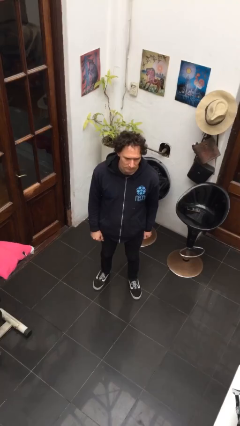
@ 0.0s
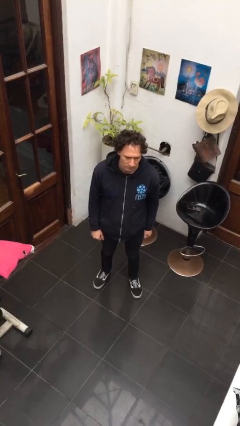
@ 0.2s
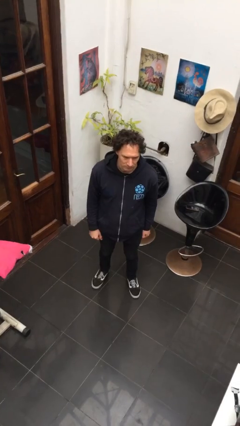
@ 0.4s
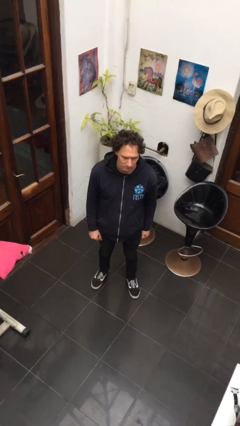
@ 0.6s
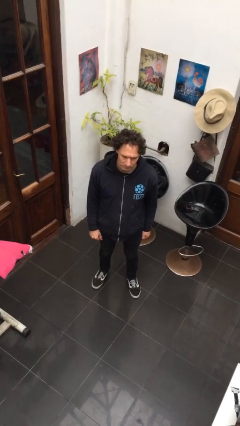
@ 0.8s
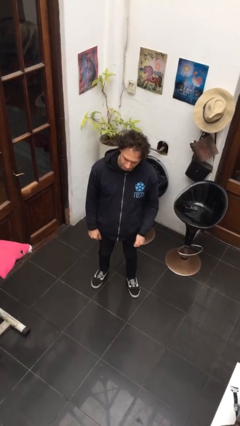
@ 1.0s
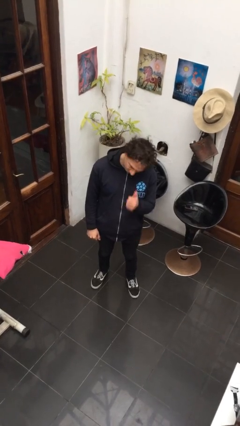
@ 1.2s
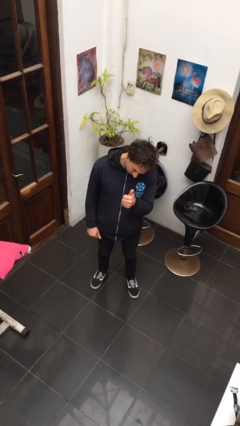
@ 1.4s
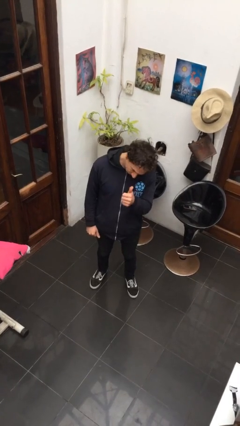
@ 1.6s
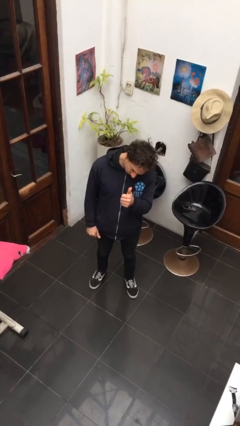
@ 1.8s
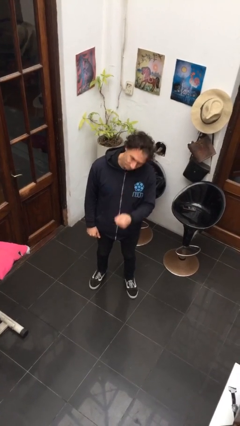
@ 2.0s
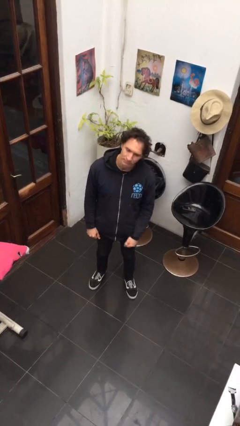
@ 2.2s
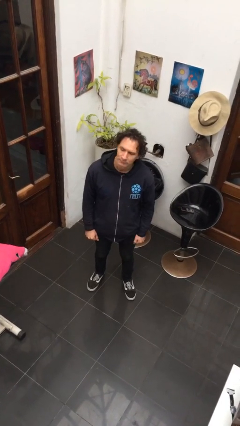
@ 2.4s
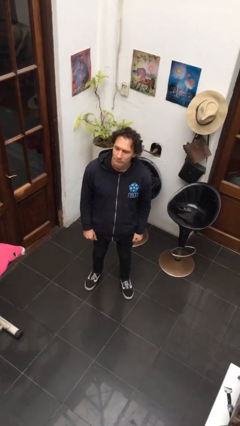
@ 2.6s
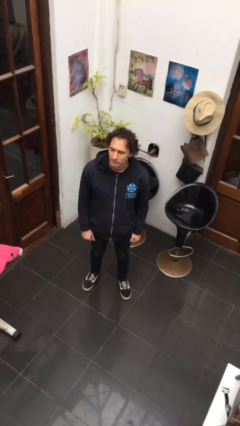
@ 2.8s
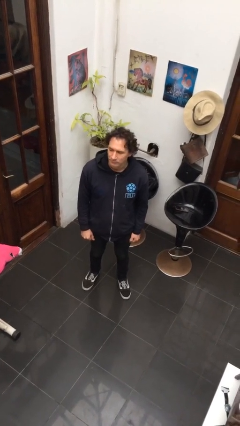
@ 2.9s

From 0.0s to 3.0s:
person gestures thumbs up

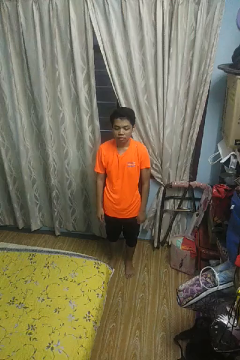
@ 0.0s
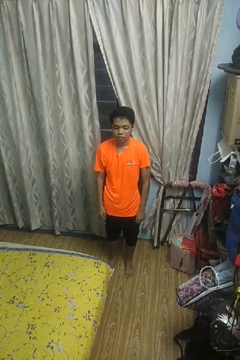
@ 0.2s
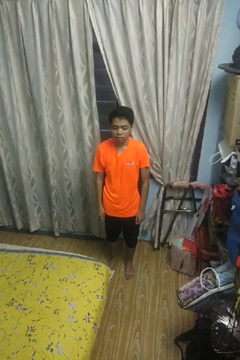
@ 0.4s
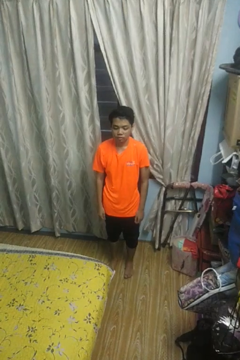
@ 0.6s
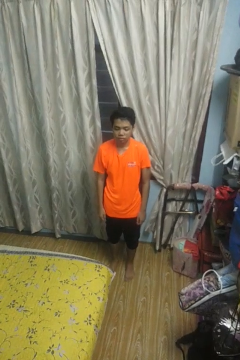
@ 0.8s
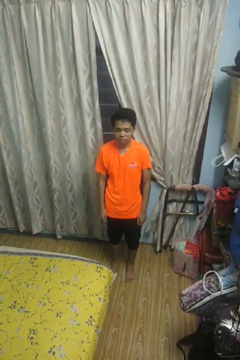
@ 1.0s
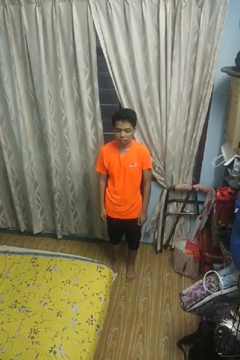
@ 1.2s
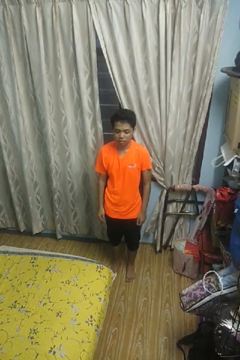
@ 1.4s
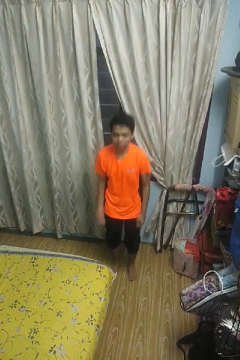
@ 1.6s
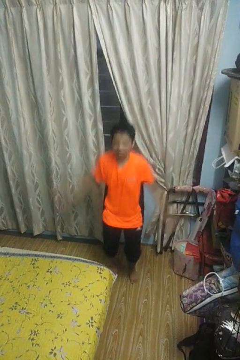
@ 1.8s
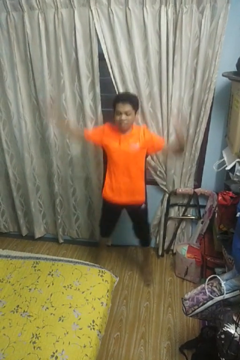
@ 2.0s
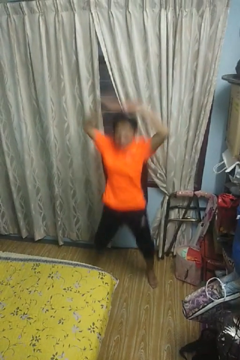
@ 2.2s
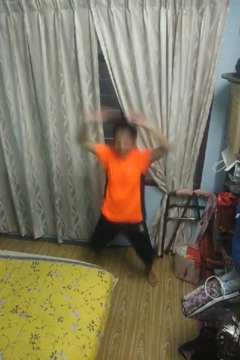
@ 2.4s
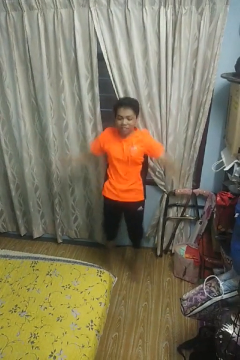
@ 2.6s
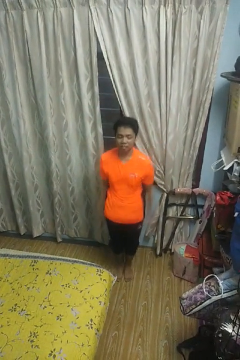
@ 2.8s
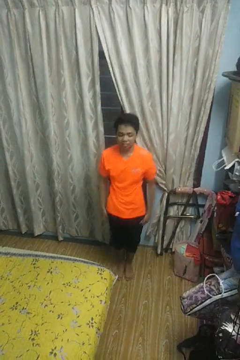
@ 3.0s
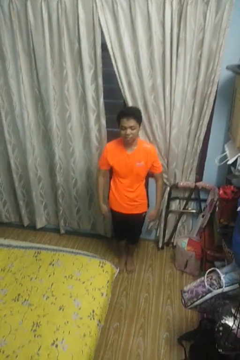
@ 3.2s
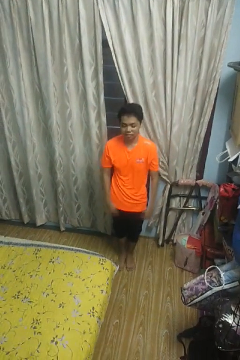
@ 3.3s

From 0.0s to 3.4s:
person exercises with jumping jacks

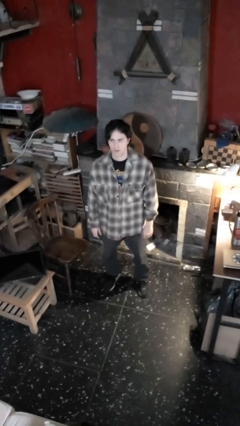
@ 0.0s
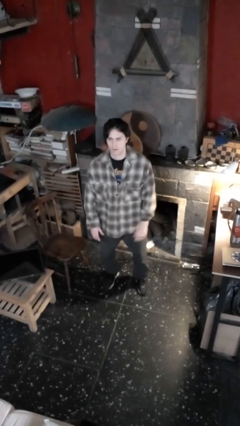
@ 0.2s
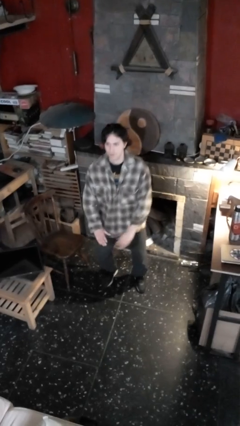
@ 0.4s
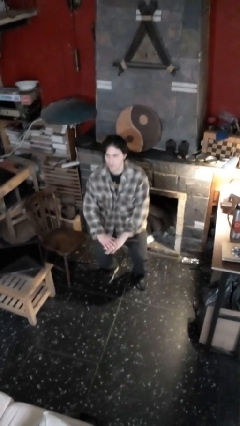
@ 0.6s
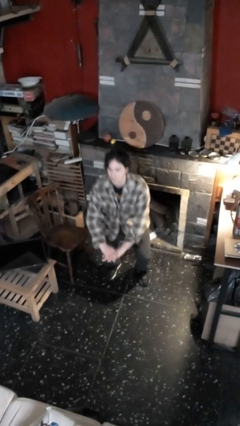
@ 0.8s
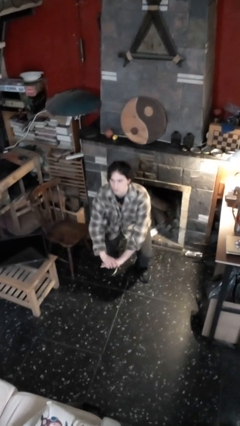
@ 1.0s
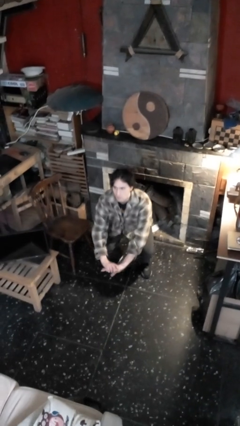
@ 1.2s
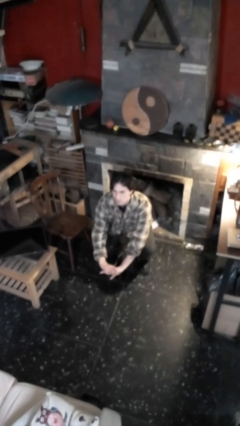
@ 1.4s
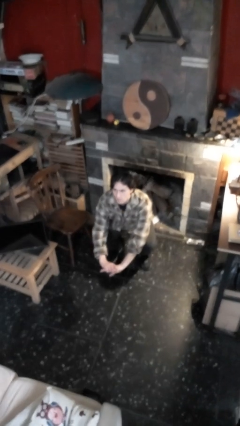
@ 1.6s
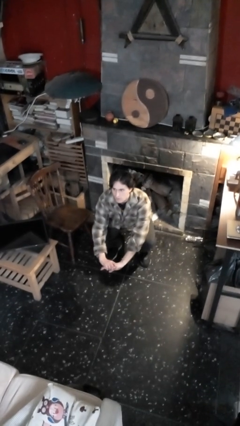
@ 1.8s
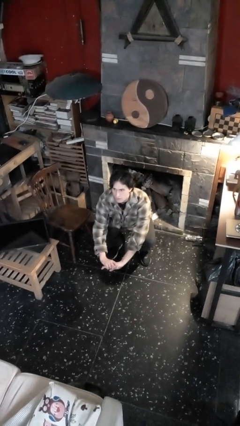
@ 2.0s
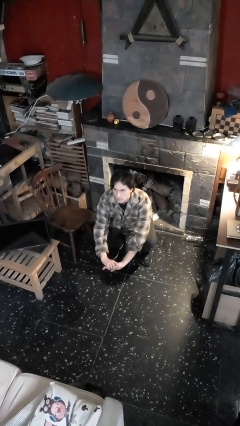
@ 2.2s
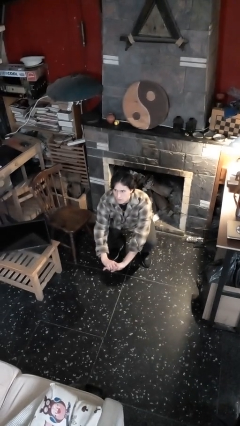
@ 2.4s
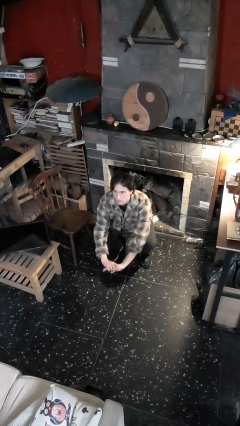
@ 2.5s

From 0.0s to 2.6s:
person squats

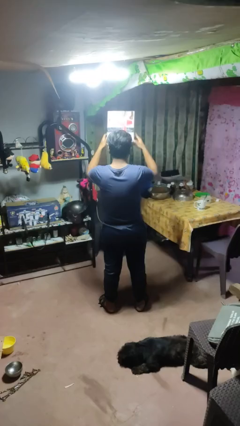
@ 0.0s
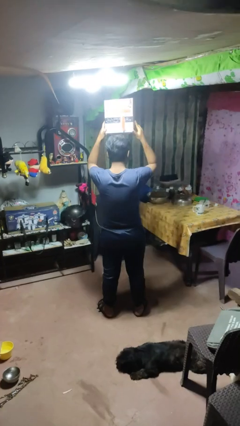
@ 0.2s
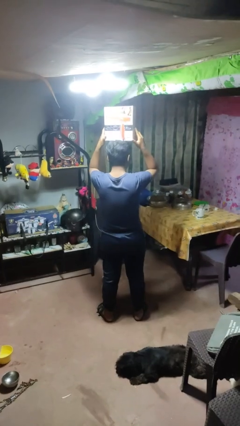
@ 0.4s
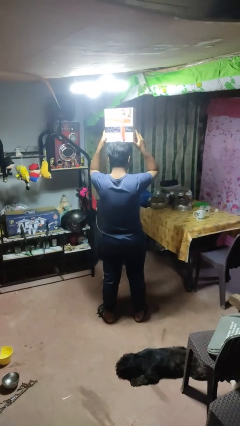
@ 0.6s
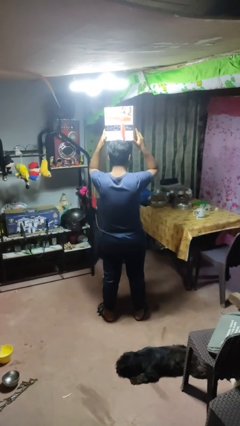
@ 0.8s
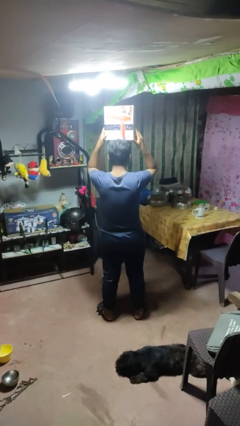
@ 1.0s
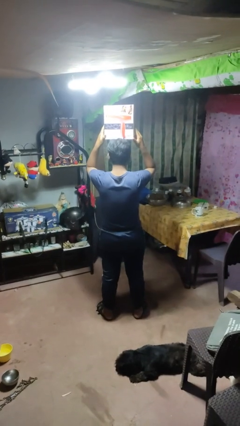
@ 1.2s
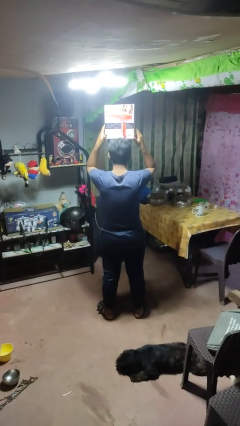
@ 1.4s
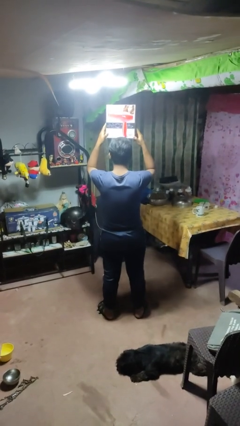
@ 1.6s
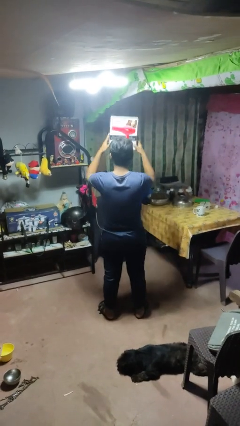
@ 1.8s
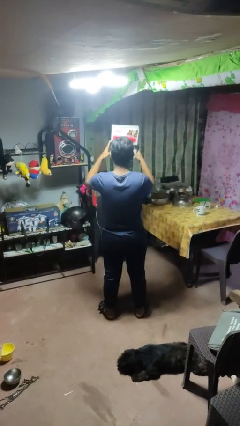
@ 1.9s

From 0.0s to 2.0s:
person holds object above head

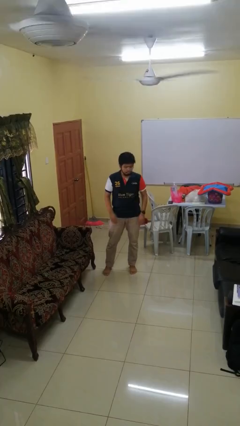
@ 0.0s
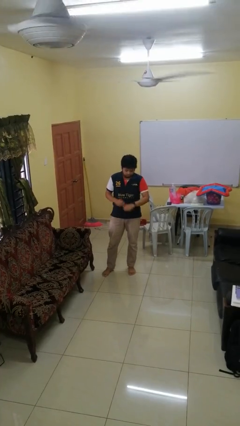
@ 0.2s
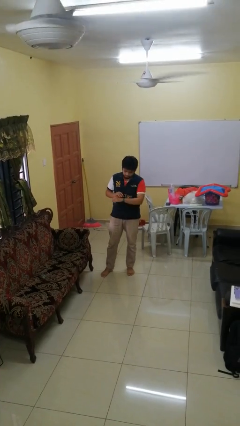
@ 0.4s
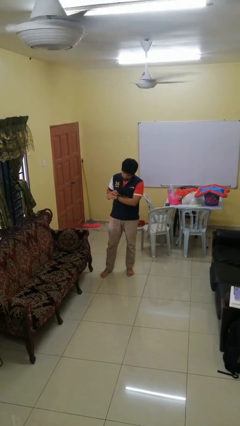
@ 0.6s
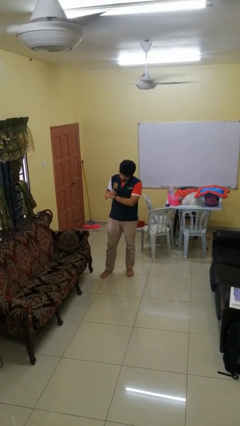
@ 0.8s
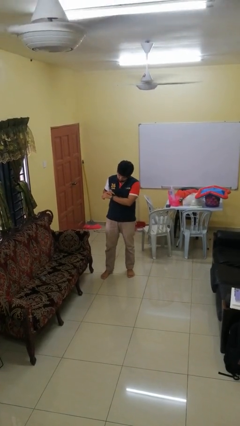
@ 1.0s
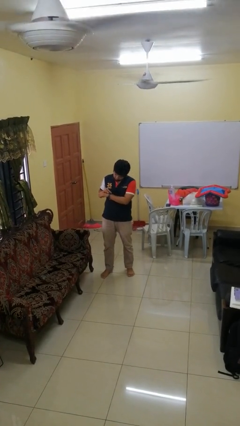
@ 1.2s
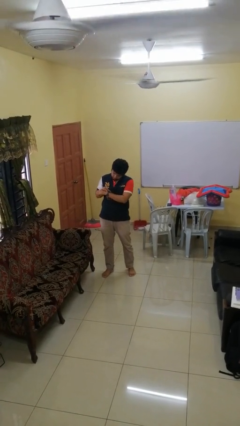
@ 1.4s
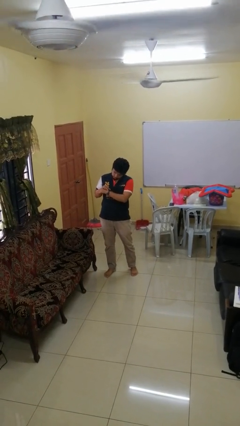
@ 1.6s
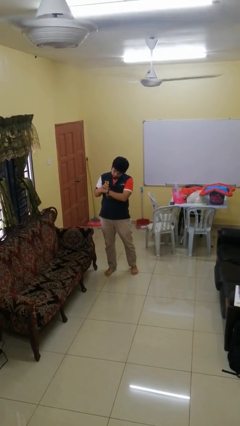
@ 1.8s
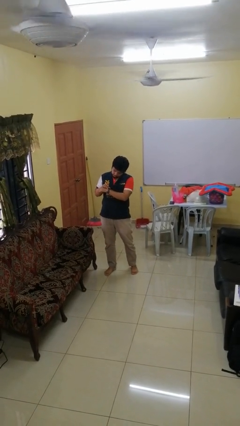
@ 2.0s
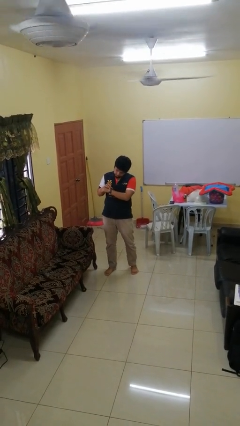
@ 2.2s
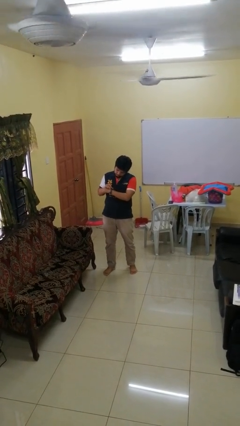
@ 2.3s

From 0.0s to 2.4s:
person looks at wristwatch

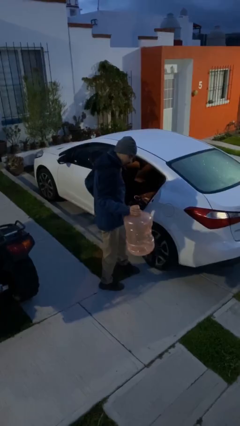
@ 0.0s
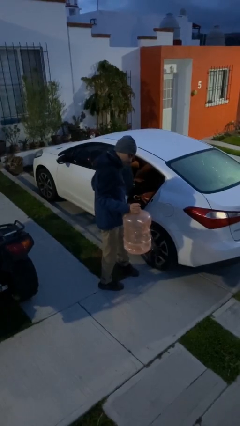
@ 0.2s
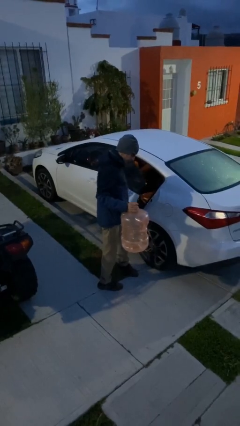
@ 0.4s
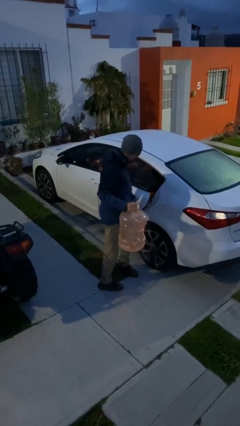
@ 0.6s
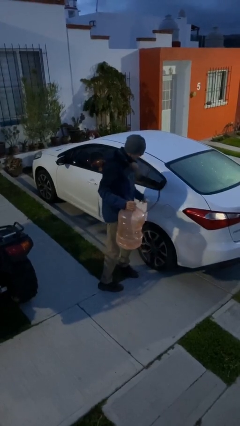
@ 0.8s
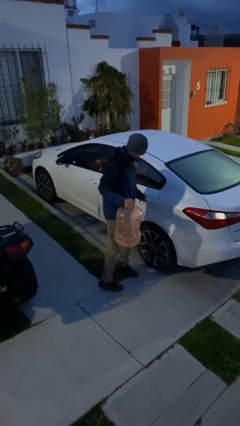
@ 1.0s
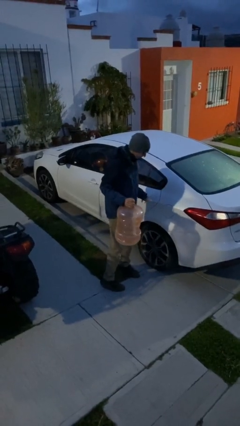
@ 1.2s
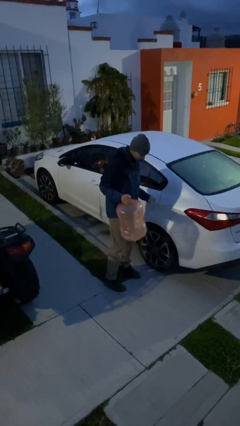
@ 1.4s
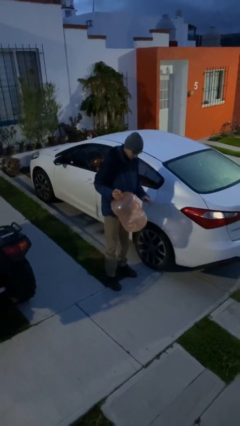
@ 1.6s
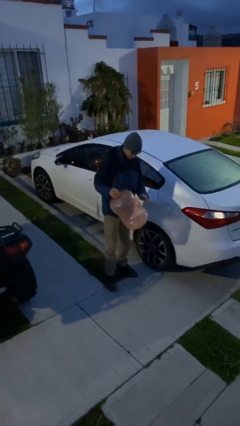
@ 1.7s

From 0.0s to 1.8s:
person closes car door

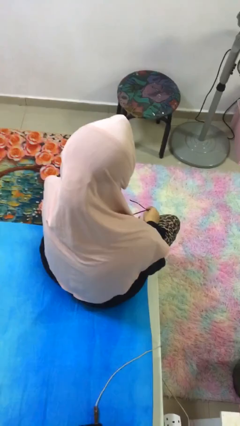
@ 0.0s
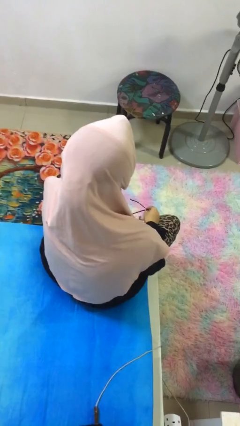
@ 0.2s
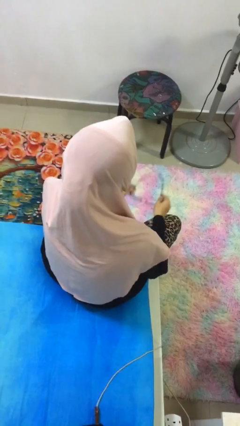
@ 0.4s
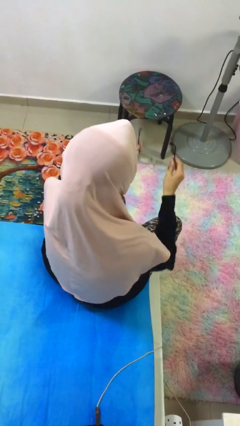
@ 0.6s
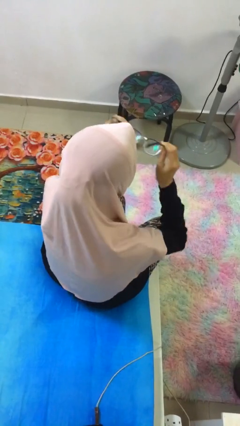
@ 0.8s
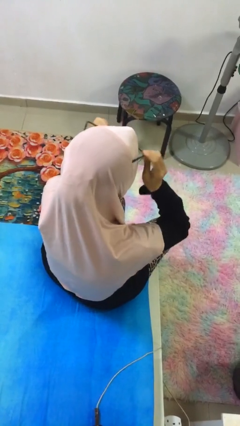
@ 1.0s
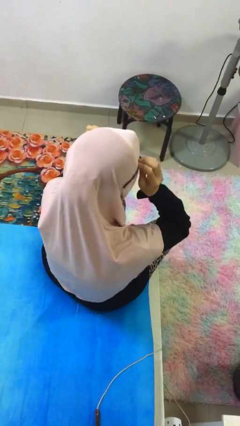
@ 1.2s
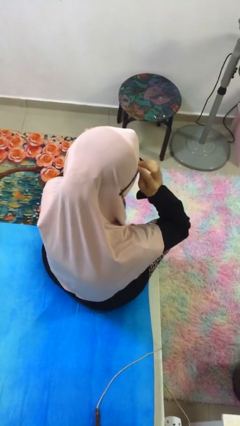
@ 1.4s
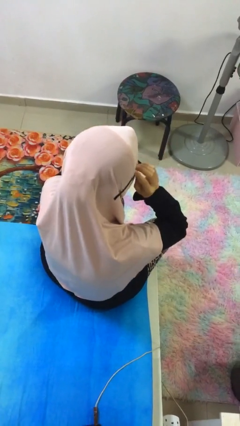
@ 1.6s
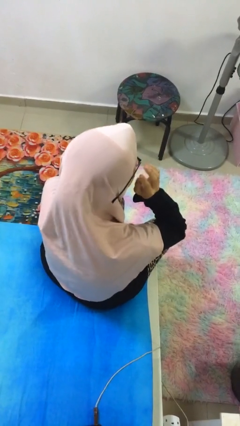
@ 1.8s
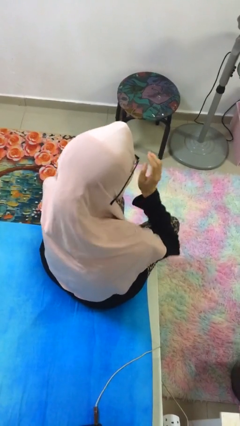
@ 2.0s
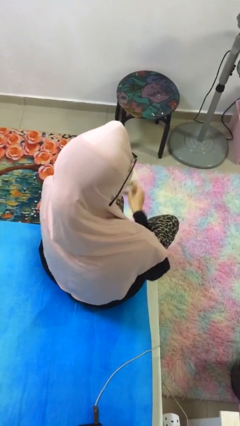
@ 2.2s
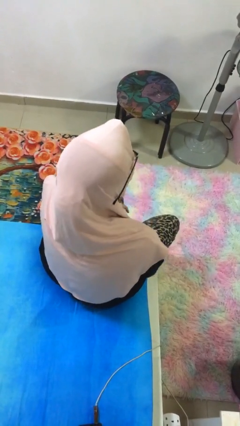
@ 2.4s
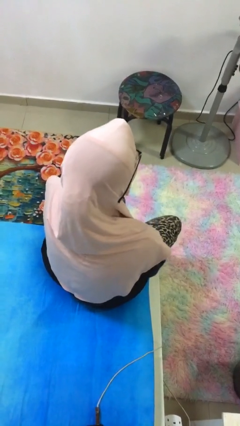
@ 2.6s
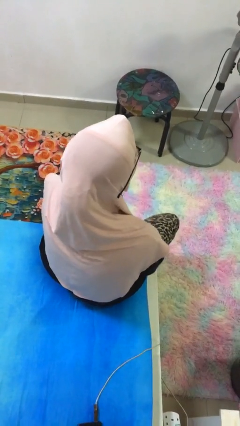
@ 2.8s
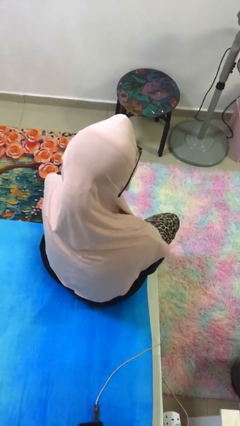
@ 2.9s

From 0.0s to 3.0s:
person puts on glasses
